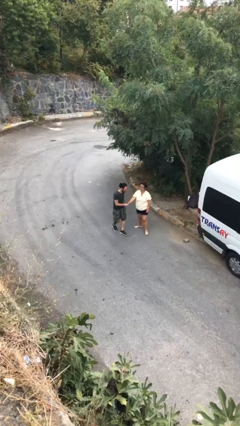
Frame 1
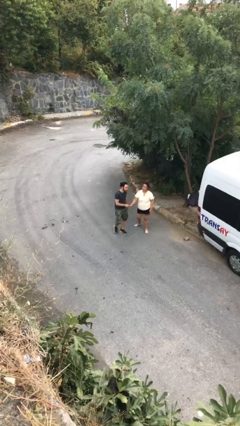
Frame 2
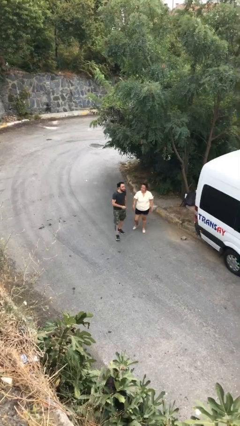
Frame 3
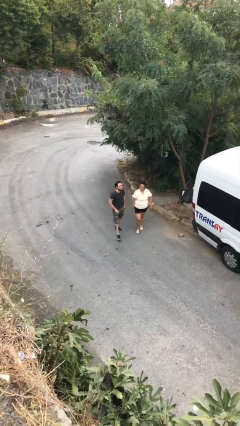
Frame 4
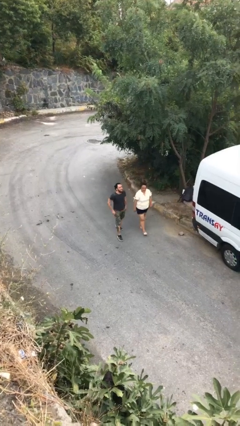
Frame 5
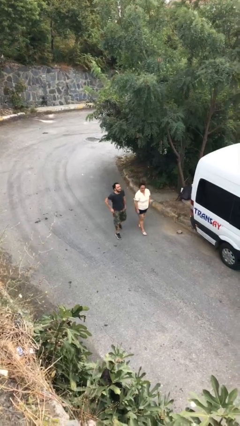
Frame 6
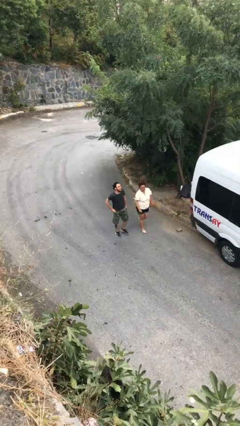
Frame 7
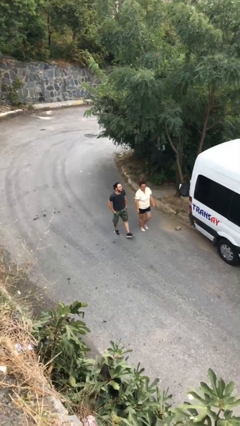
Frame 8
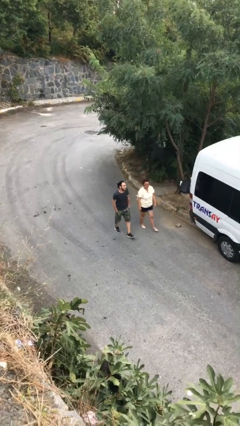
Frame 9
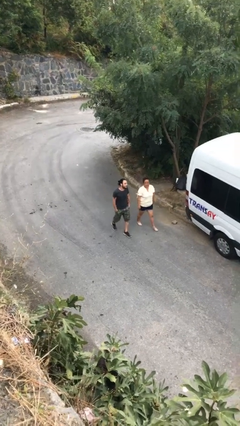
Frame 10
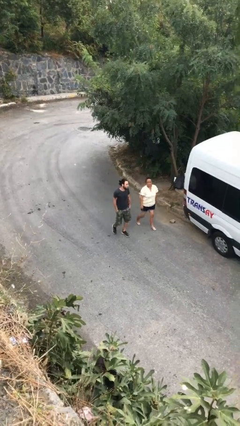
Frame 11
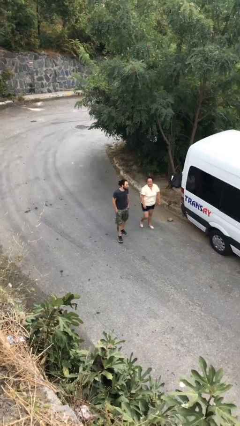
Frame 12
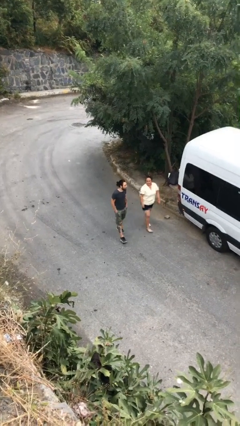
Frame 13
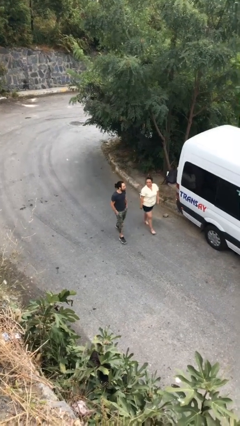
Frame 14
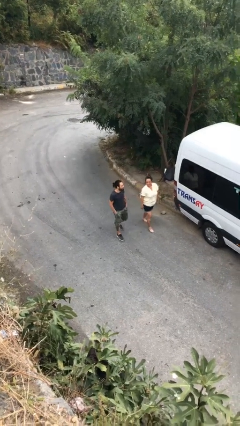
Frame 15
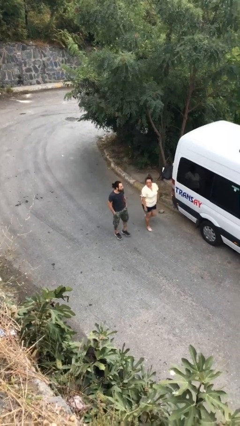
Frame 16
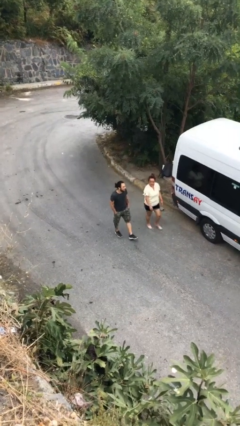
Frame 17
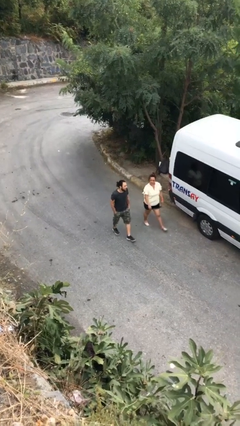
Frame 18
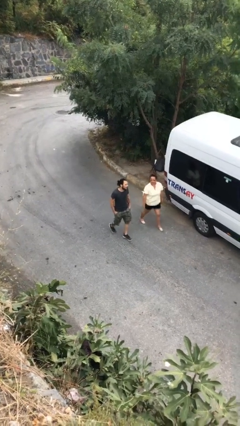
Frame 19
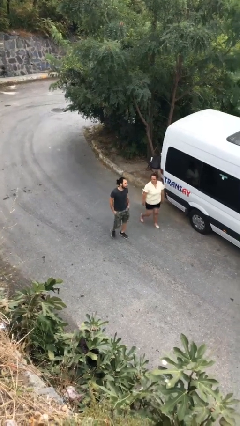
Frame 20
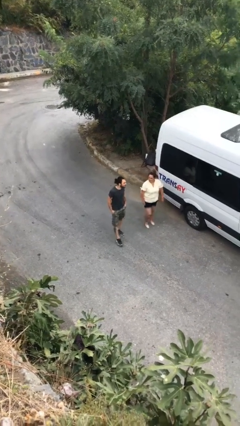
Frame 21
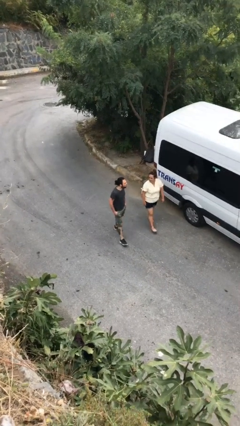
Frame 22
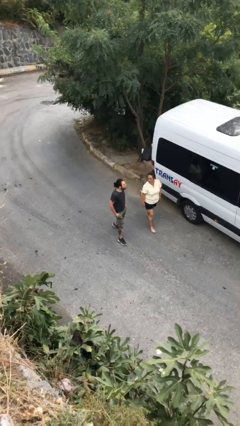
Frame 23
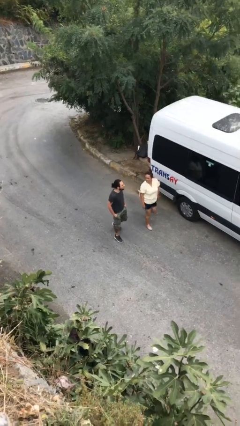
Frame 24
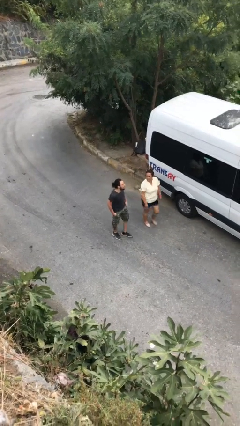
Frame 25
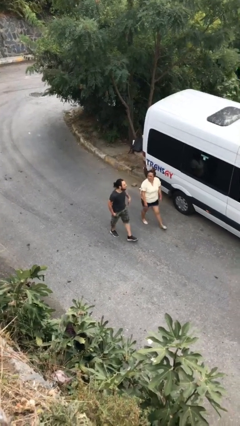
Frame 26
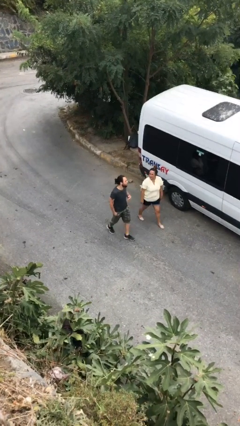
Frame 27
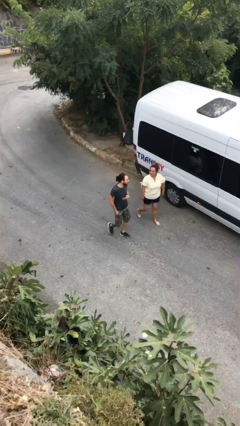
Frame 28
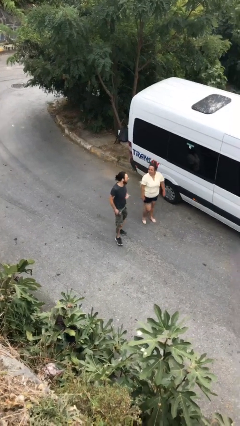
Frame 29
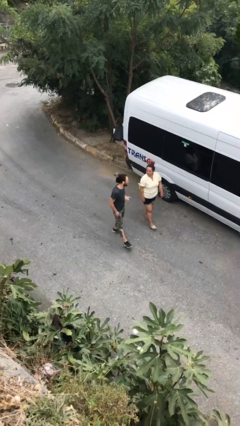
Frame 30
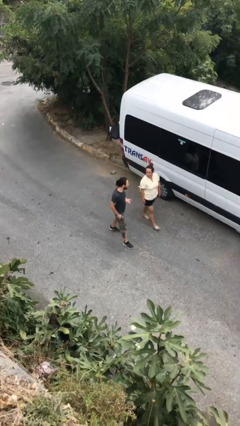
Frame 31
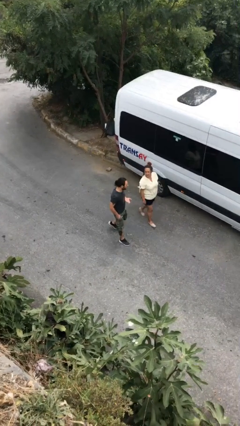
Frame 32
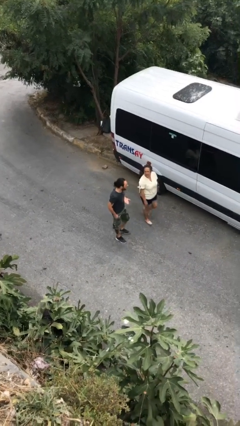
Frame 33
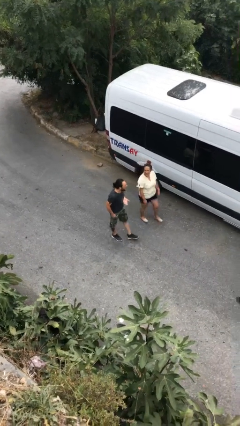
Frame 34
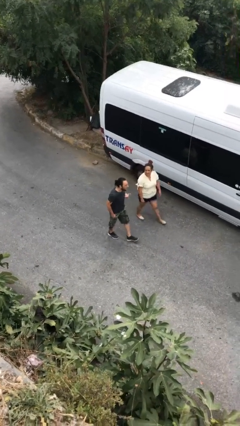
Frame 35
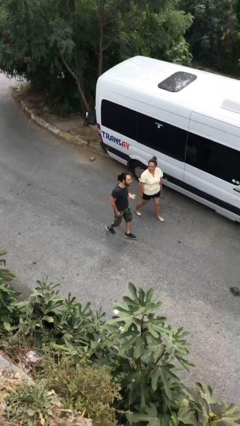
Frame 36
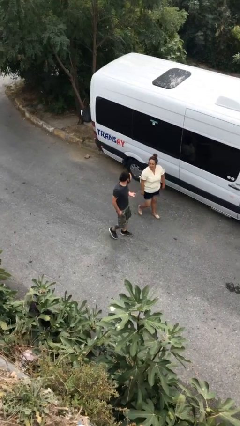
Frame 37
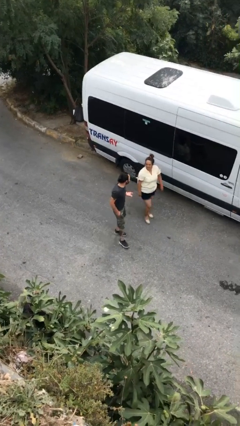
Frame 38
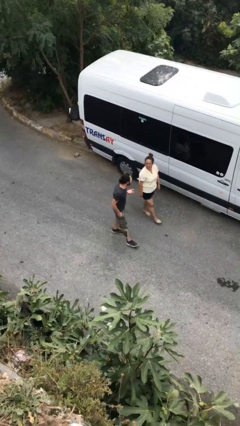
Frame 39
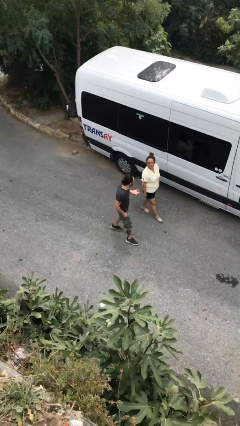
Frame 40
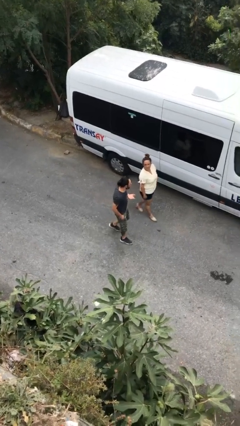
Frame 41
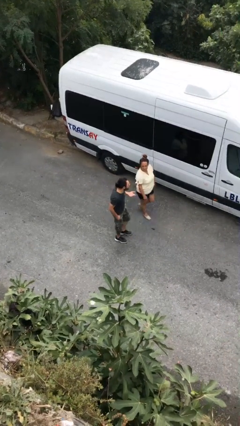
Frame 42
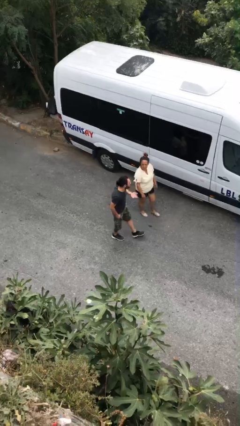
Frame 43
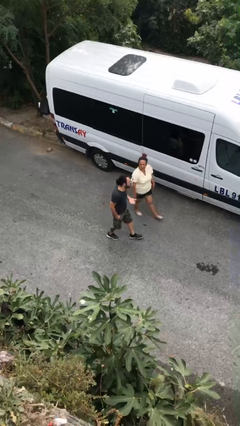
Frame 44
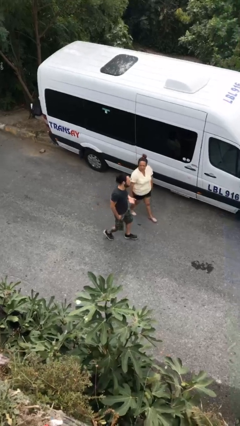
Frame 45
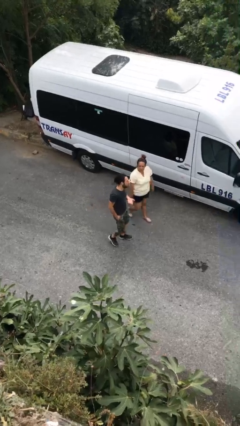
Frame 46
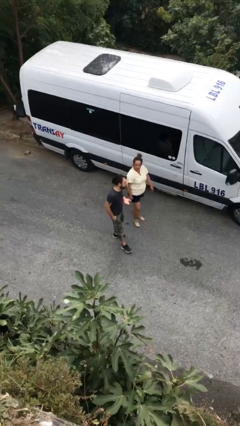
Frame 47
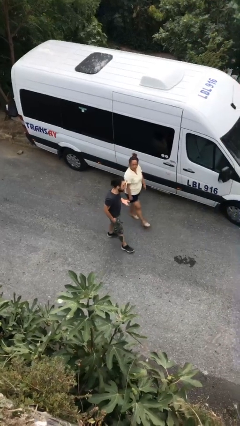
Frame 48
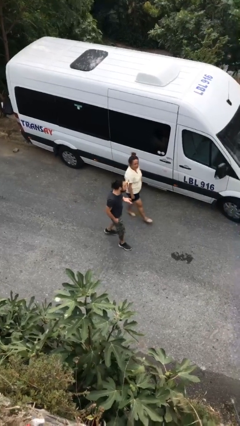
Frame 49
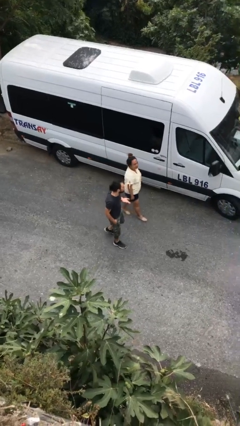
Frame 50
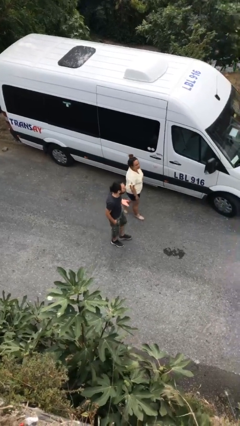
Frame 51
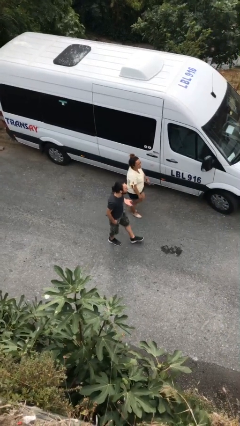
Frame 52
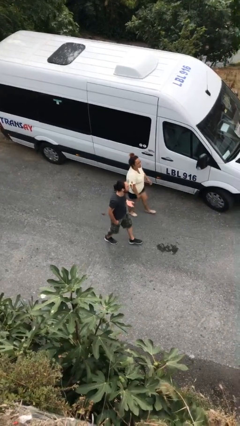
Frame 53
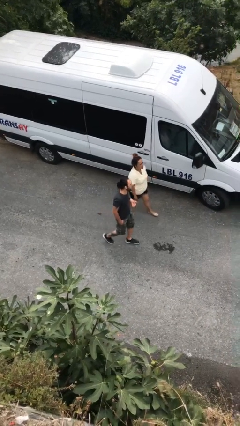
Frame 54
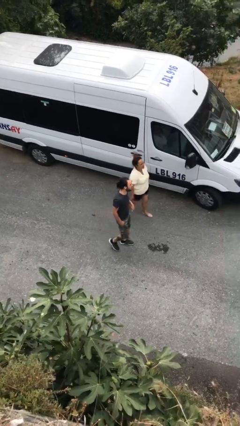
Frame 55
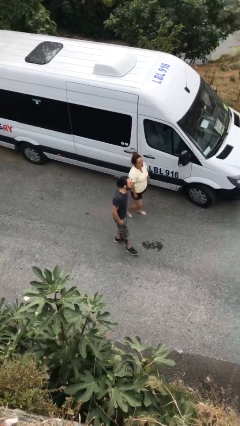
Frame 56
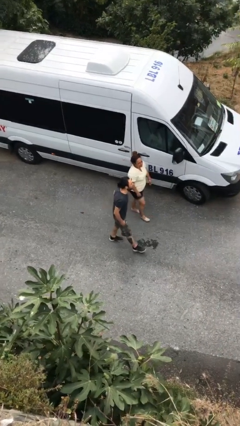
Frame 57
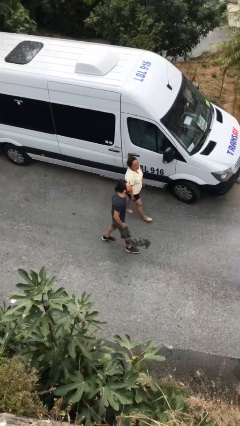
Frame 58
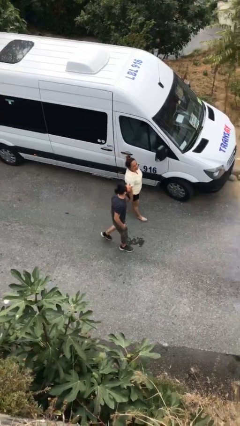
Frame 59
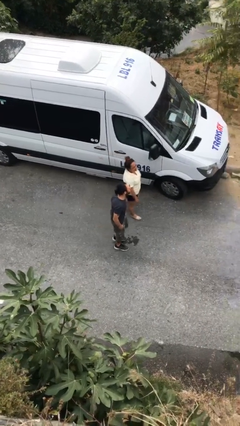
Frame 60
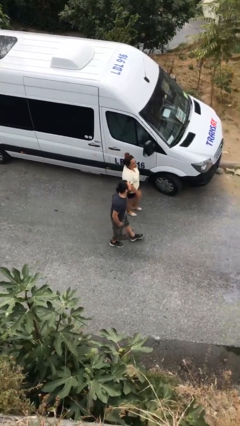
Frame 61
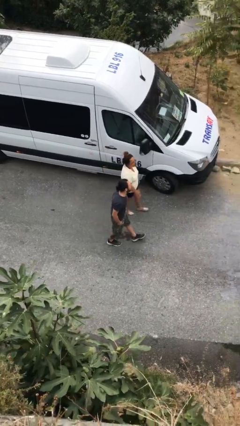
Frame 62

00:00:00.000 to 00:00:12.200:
person talks to person

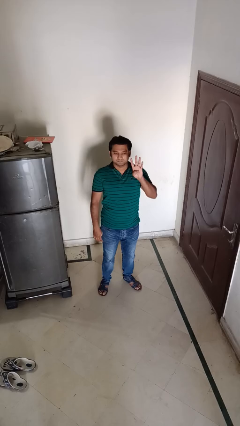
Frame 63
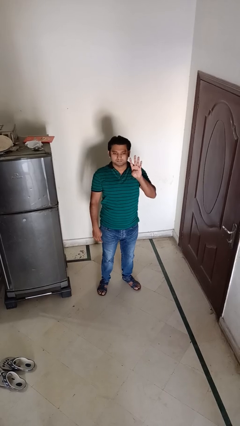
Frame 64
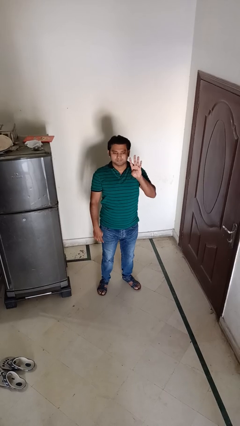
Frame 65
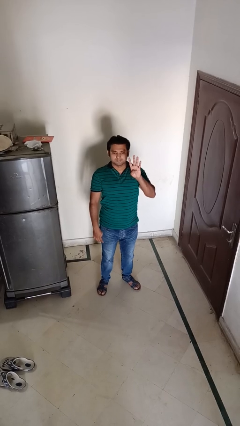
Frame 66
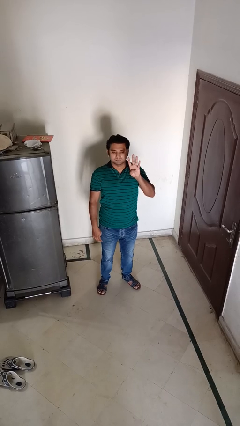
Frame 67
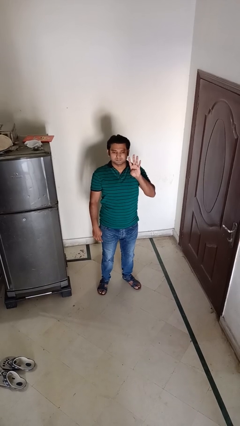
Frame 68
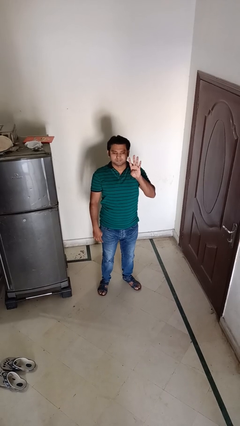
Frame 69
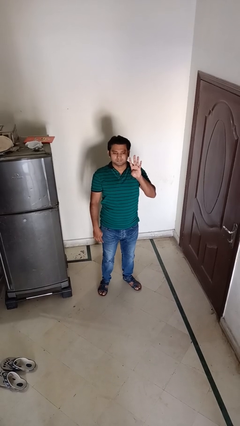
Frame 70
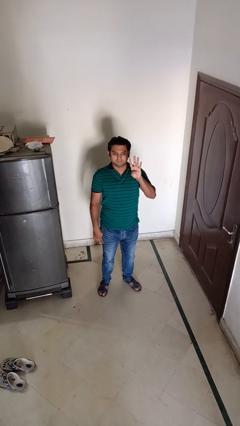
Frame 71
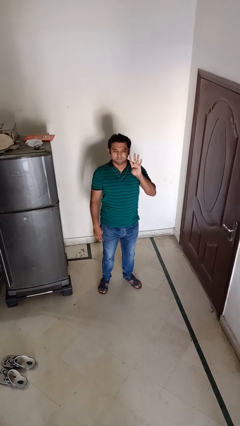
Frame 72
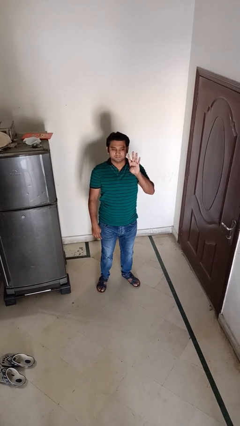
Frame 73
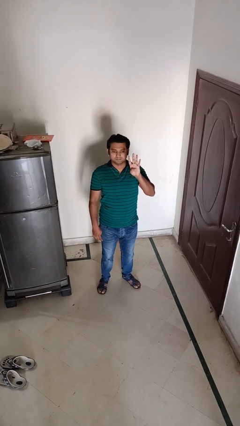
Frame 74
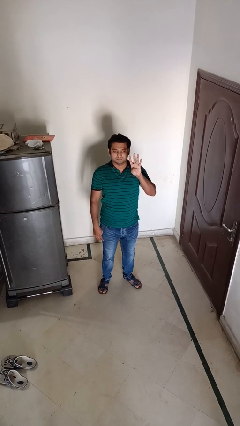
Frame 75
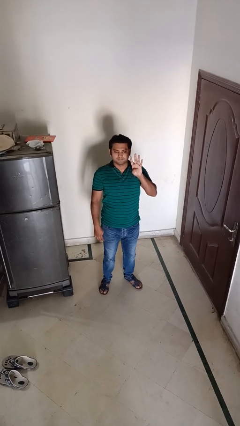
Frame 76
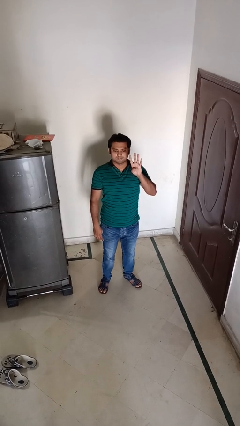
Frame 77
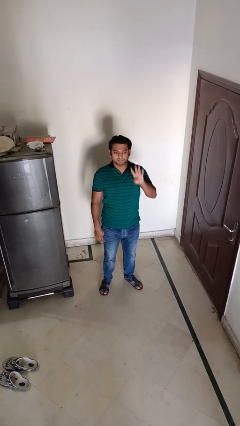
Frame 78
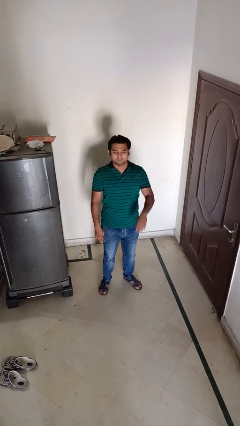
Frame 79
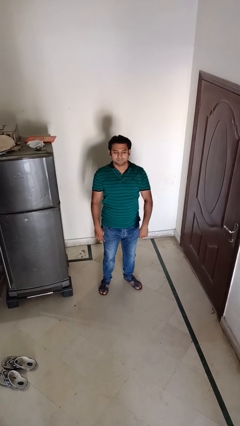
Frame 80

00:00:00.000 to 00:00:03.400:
person gestures number four

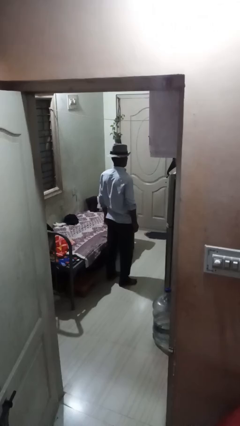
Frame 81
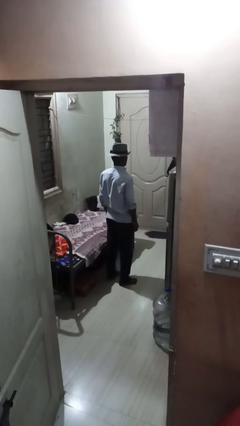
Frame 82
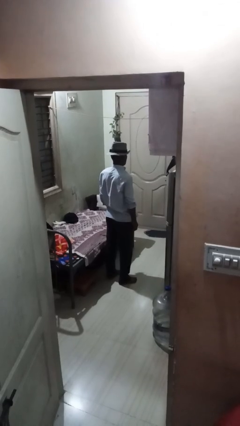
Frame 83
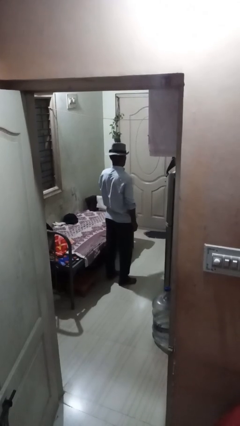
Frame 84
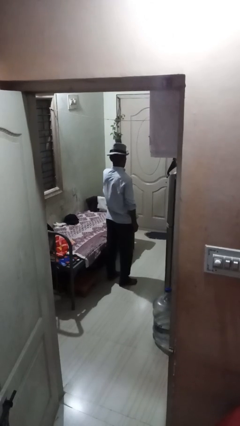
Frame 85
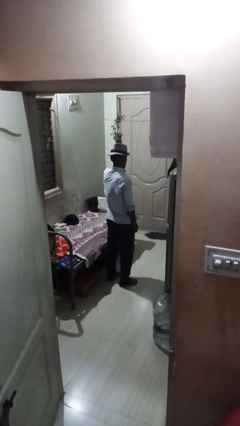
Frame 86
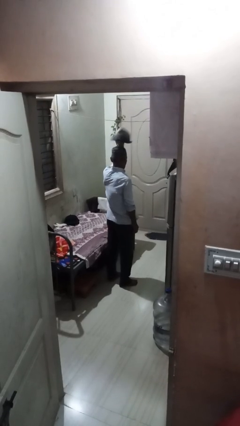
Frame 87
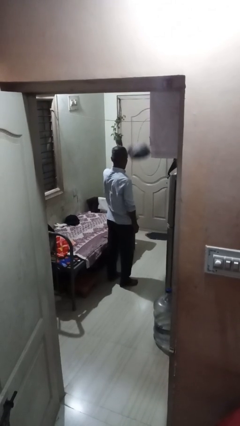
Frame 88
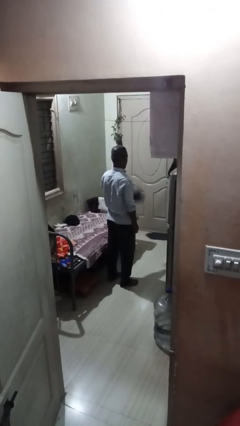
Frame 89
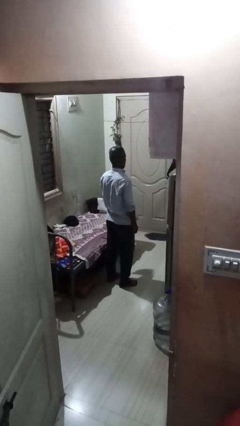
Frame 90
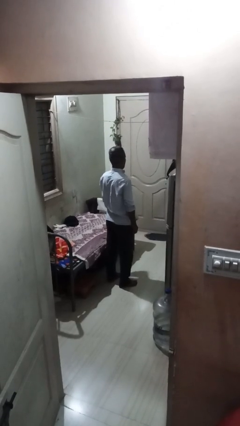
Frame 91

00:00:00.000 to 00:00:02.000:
person takes off hat

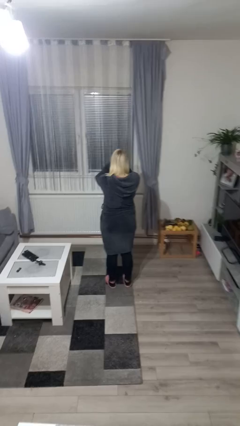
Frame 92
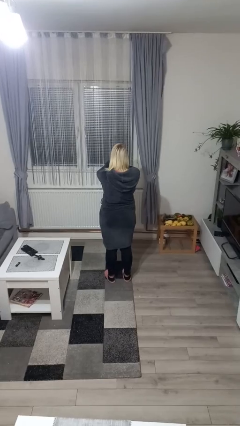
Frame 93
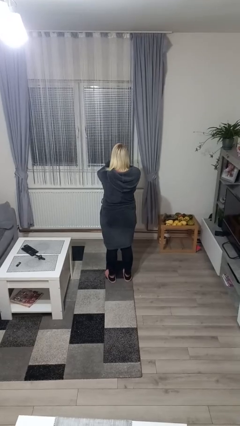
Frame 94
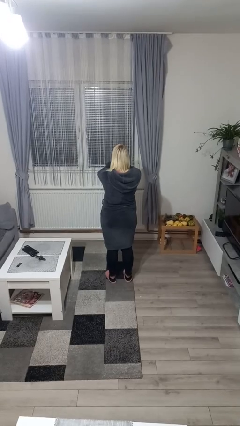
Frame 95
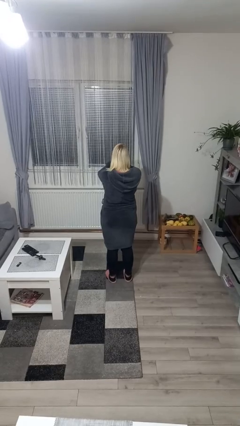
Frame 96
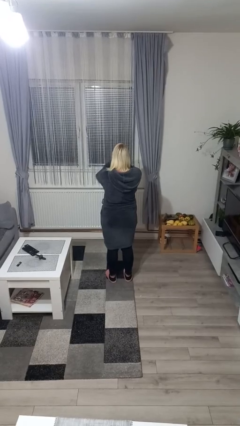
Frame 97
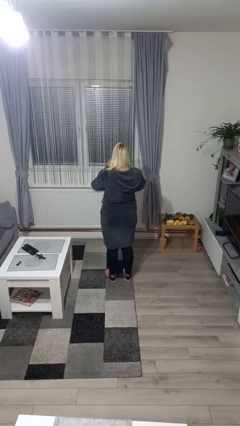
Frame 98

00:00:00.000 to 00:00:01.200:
person covers face with hands
